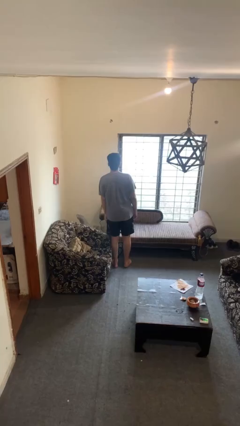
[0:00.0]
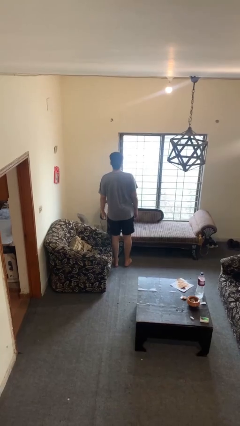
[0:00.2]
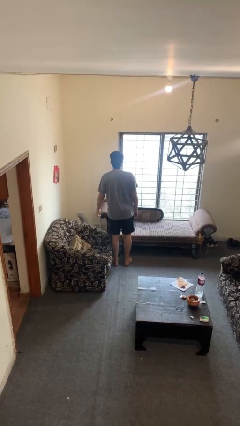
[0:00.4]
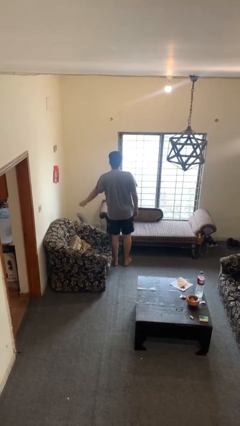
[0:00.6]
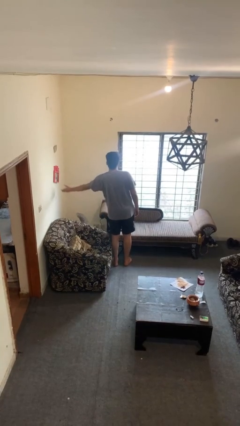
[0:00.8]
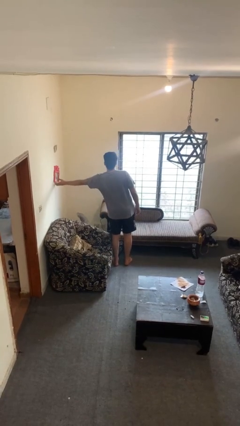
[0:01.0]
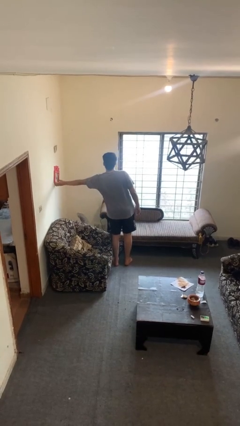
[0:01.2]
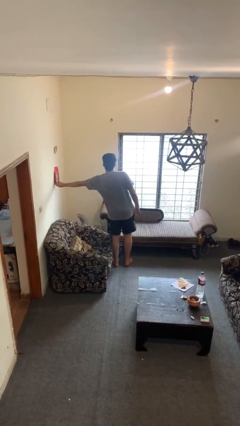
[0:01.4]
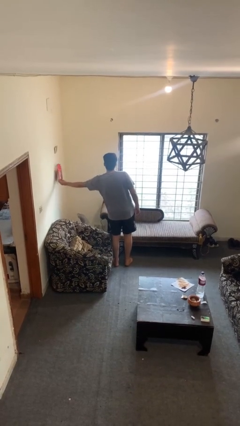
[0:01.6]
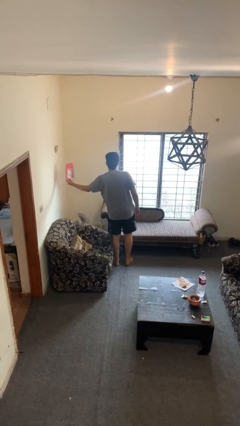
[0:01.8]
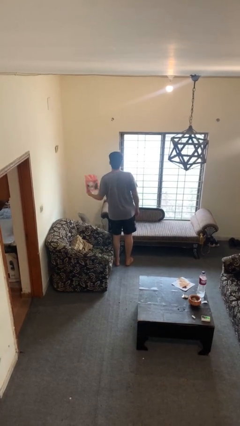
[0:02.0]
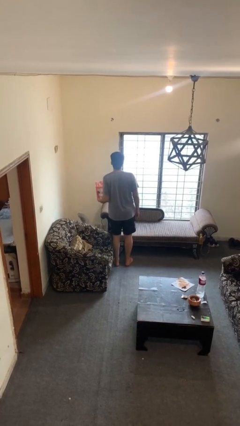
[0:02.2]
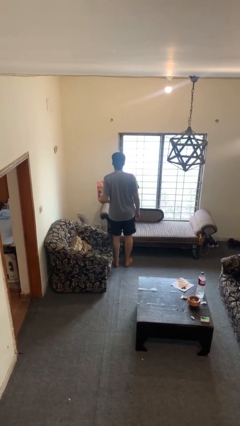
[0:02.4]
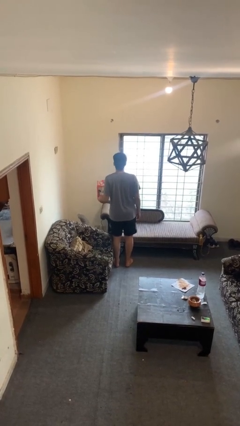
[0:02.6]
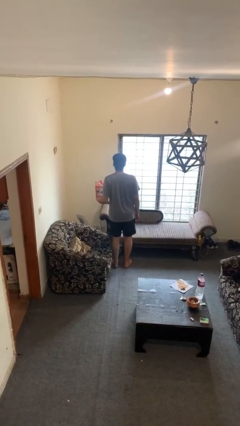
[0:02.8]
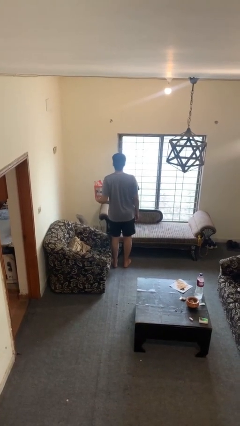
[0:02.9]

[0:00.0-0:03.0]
person takes down picture frame

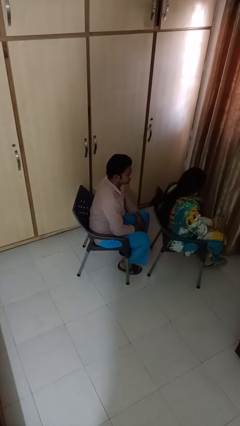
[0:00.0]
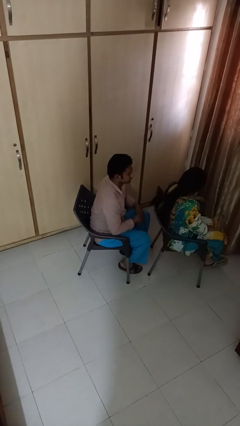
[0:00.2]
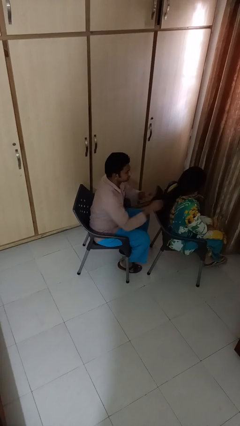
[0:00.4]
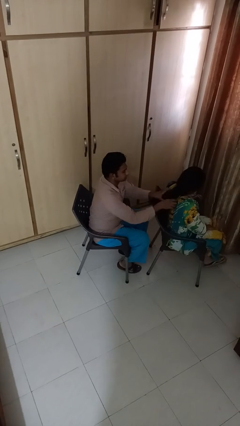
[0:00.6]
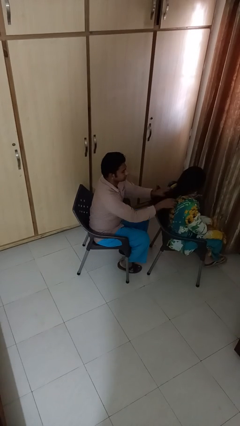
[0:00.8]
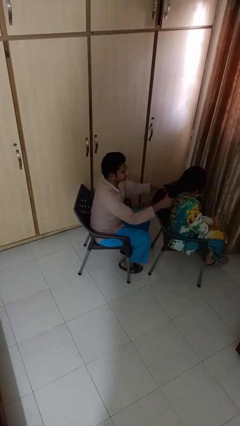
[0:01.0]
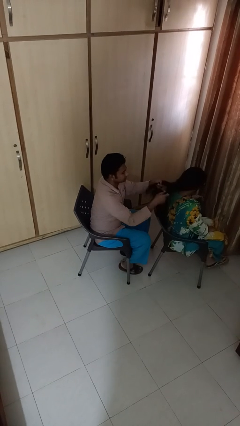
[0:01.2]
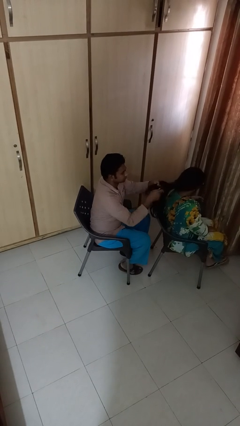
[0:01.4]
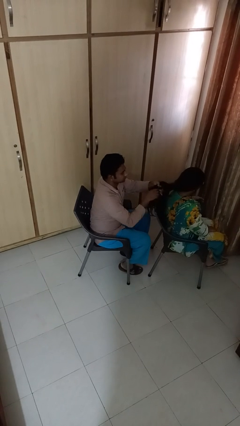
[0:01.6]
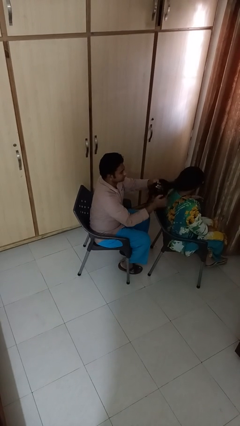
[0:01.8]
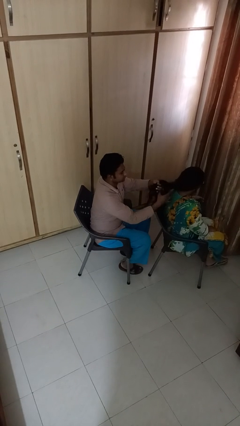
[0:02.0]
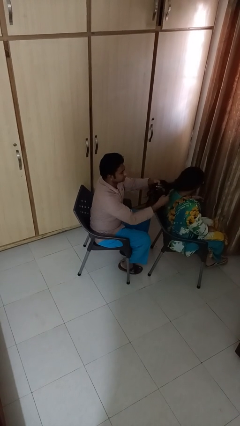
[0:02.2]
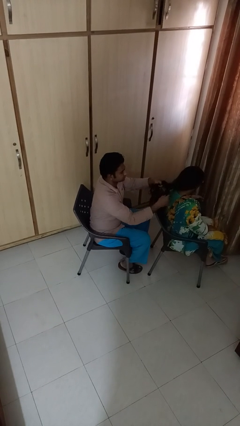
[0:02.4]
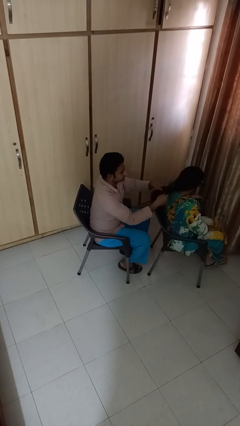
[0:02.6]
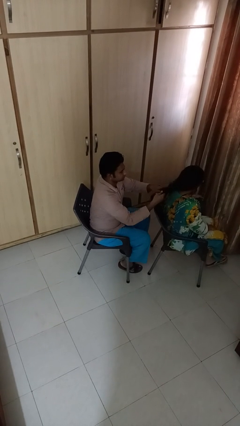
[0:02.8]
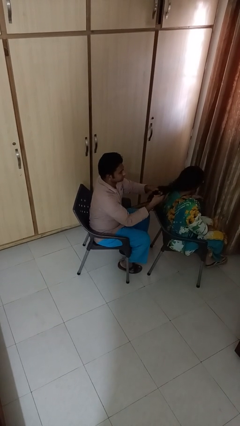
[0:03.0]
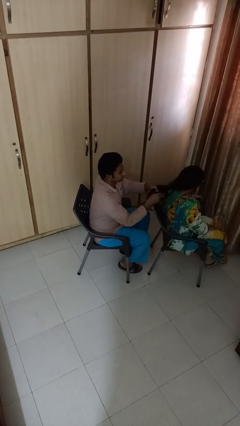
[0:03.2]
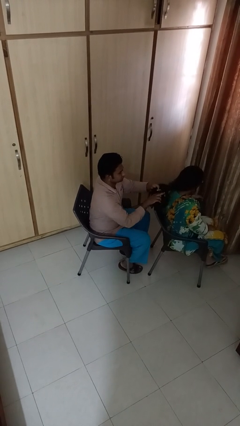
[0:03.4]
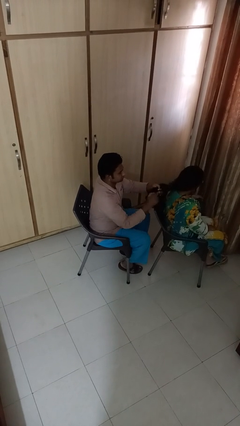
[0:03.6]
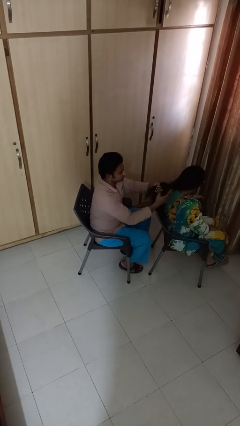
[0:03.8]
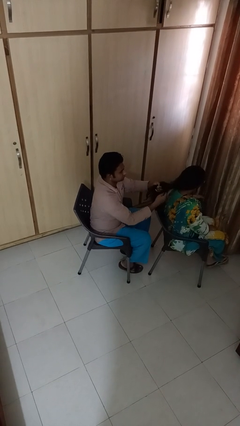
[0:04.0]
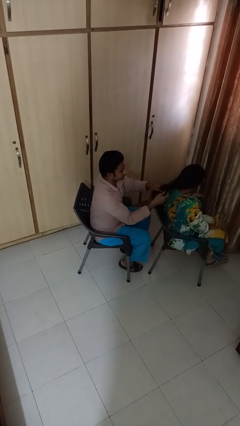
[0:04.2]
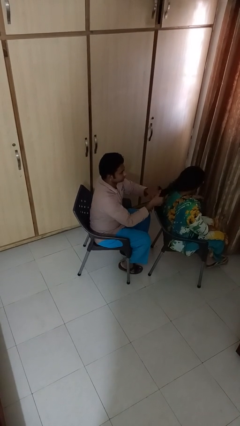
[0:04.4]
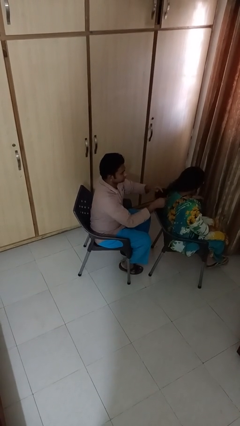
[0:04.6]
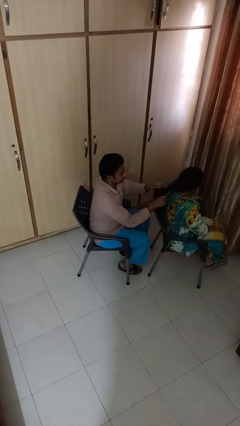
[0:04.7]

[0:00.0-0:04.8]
person braids hair of person

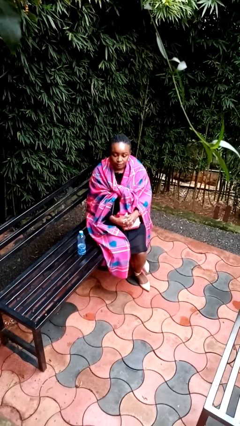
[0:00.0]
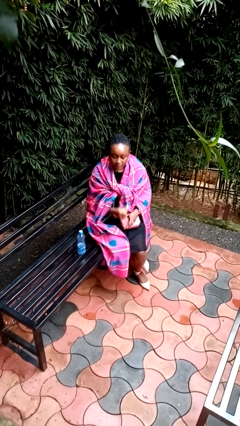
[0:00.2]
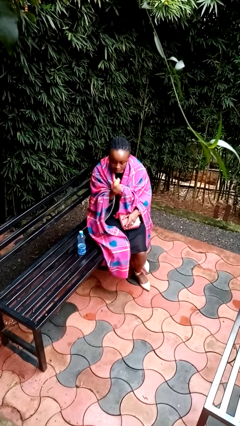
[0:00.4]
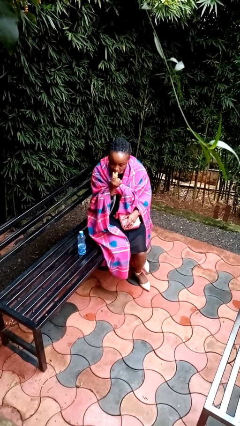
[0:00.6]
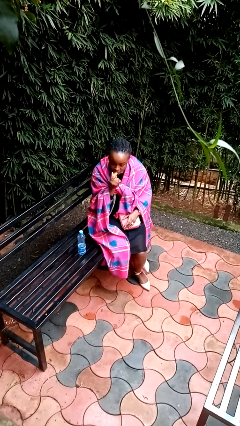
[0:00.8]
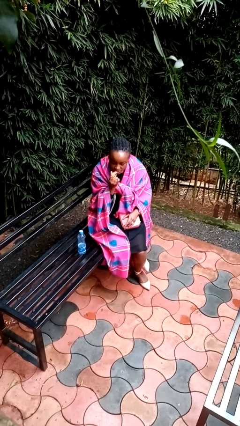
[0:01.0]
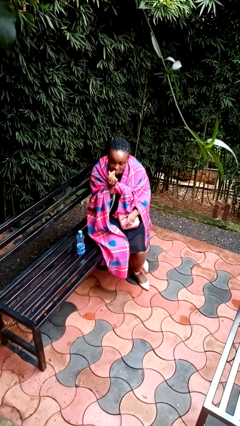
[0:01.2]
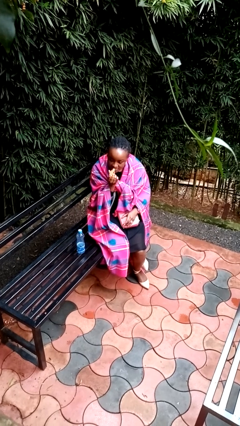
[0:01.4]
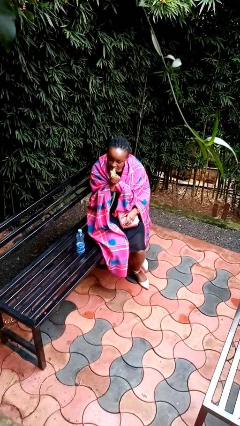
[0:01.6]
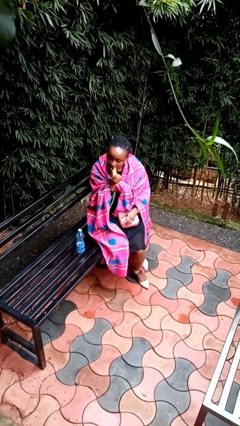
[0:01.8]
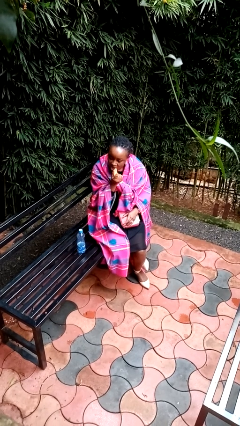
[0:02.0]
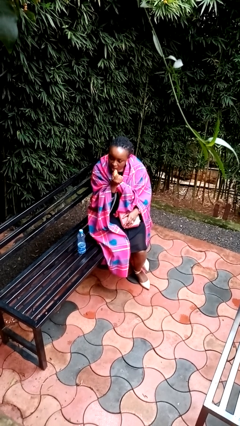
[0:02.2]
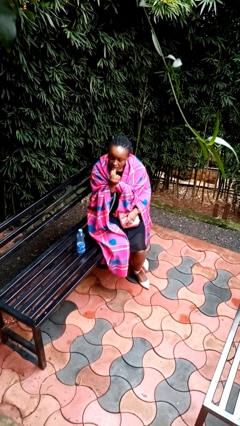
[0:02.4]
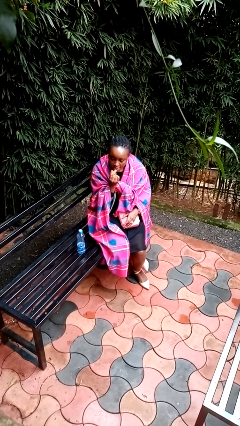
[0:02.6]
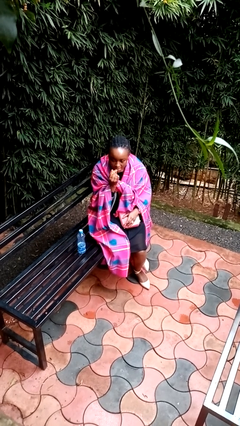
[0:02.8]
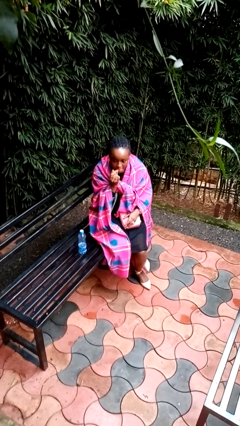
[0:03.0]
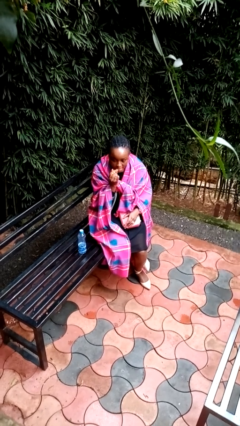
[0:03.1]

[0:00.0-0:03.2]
person applies lip makeup

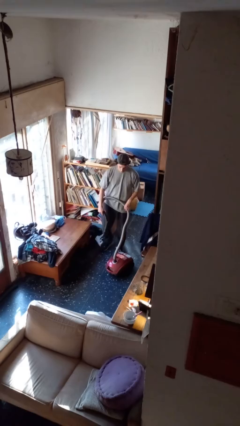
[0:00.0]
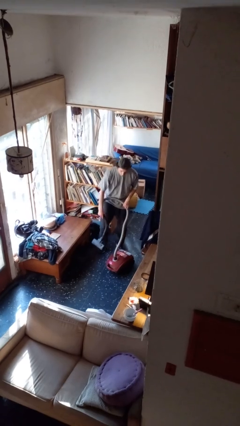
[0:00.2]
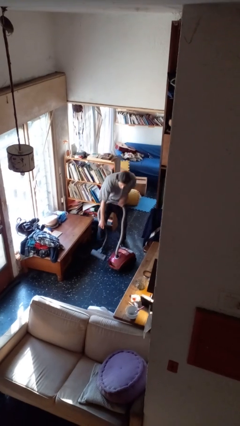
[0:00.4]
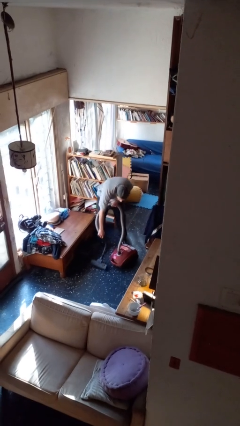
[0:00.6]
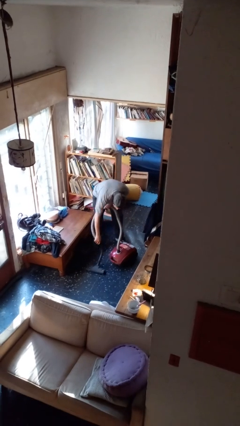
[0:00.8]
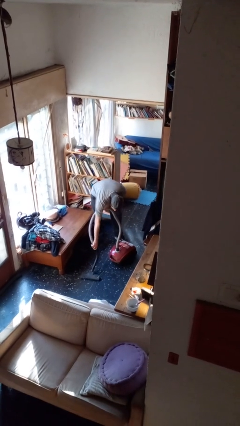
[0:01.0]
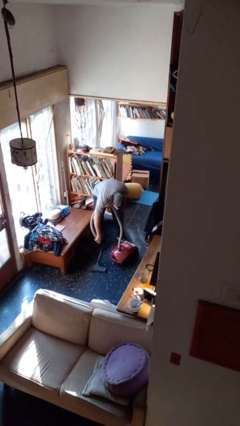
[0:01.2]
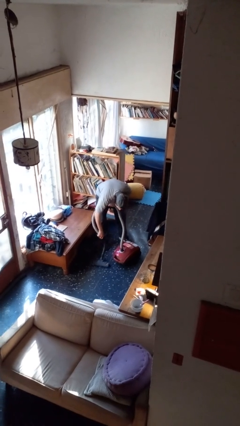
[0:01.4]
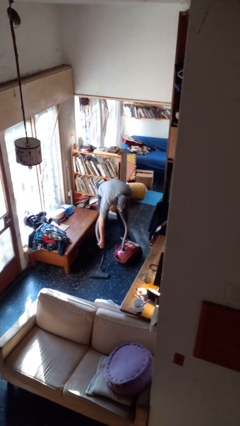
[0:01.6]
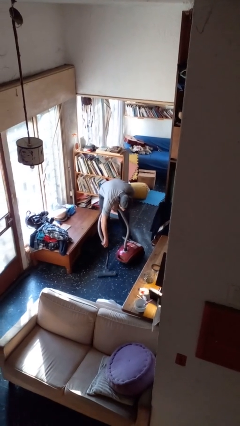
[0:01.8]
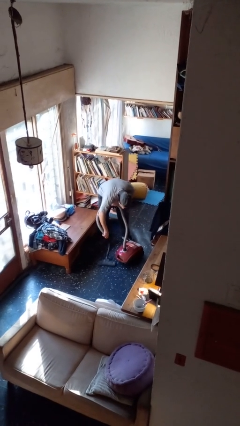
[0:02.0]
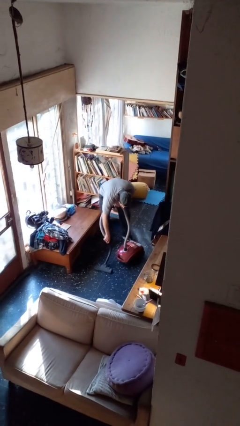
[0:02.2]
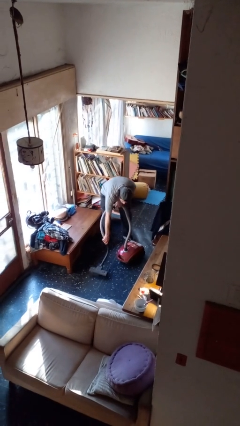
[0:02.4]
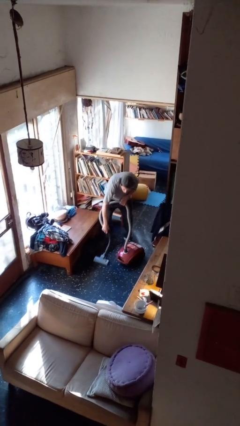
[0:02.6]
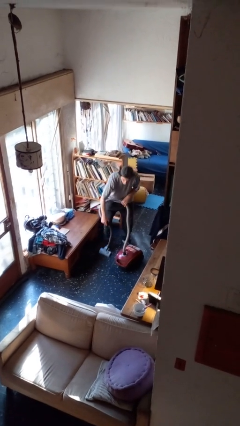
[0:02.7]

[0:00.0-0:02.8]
person vacuums carpet

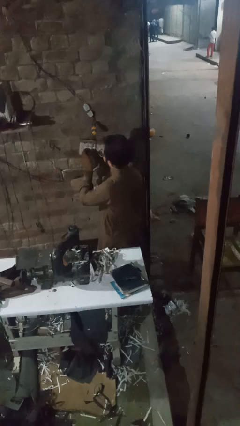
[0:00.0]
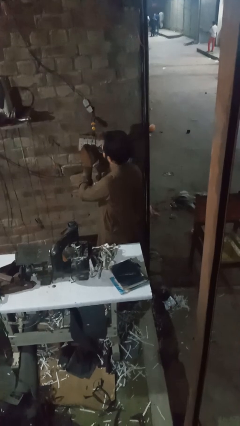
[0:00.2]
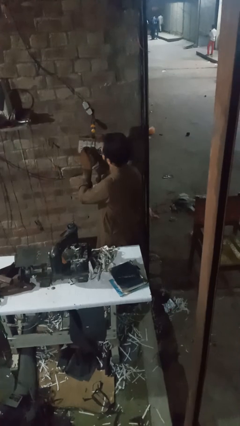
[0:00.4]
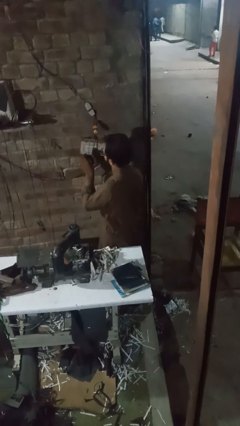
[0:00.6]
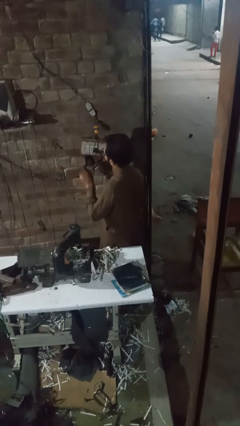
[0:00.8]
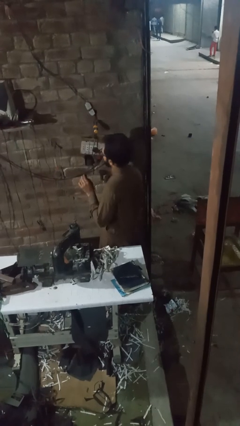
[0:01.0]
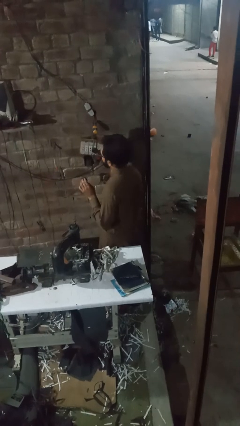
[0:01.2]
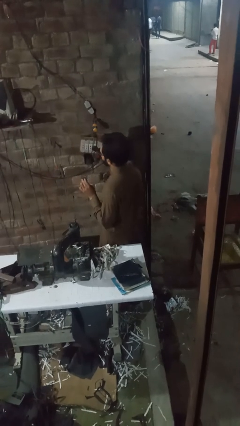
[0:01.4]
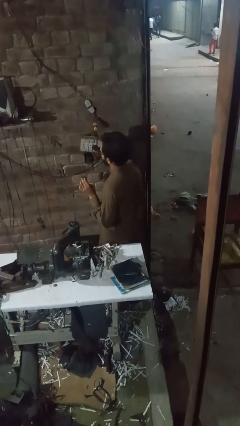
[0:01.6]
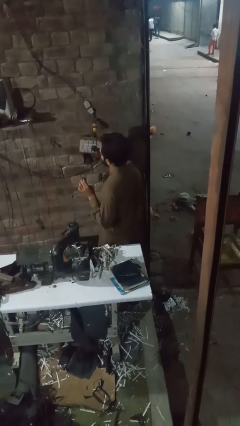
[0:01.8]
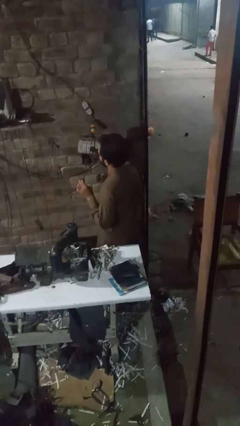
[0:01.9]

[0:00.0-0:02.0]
person unplugs from electrical socket

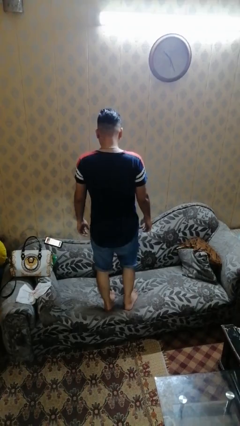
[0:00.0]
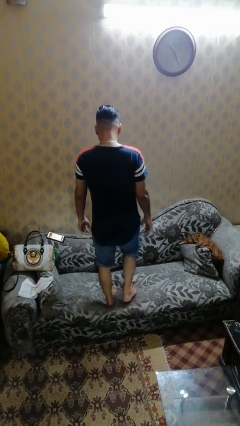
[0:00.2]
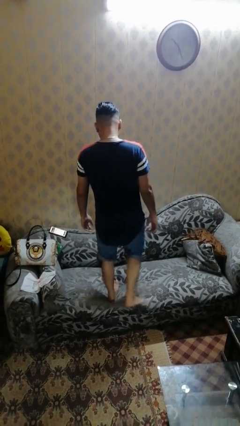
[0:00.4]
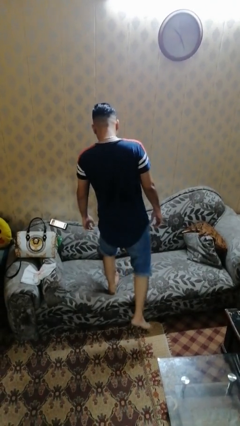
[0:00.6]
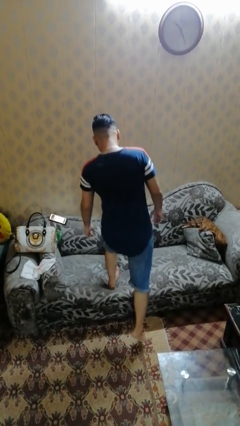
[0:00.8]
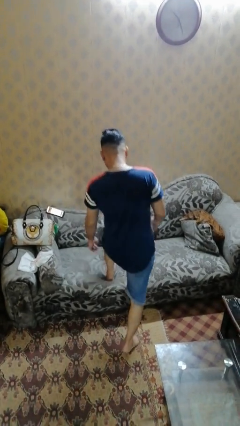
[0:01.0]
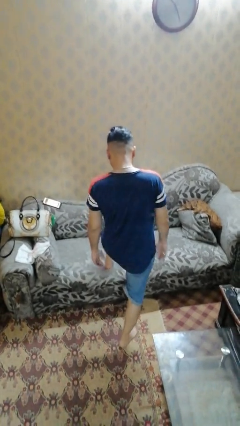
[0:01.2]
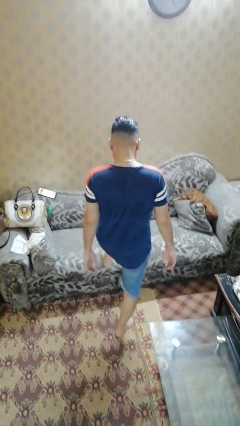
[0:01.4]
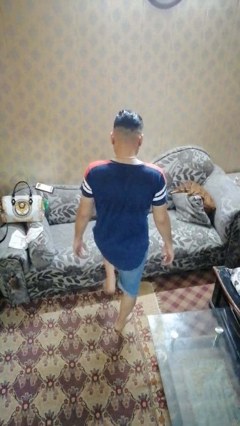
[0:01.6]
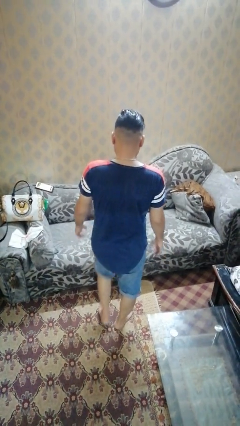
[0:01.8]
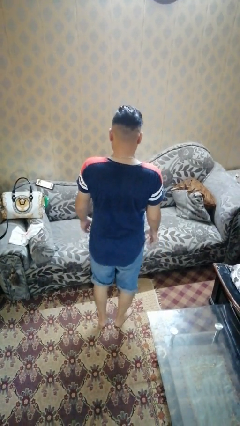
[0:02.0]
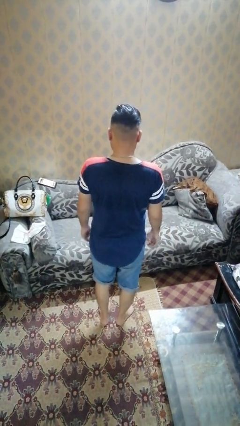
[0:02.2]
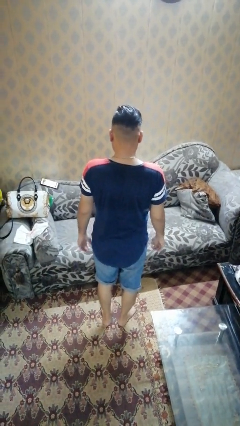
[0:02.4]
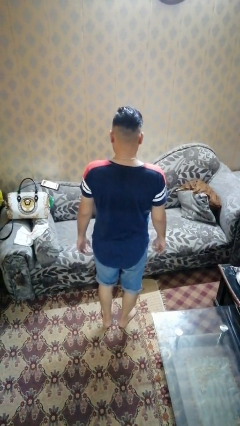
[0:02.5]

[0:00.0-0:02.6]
person climbs off couch
